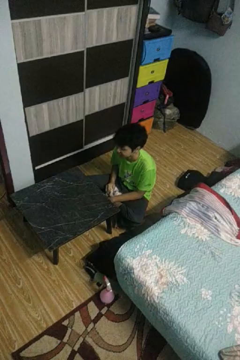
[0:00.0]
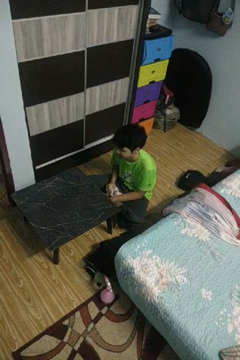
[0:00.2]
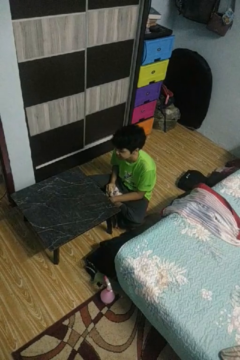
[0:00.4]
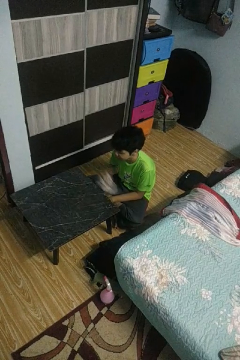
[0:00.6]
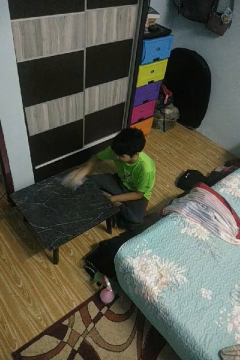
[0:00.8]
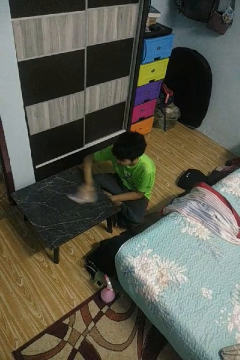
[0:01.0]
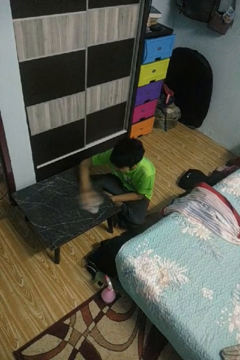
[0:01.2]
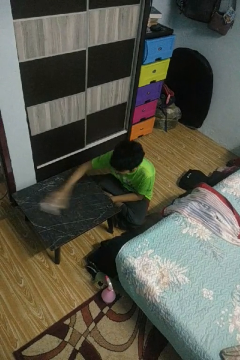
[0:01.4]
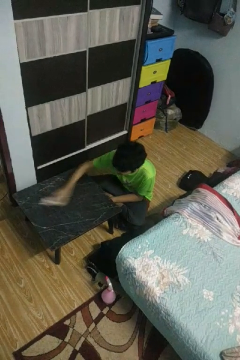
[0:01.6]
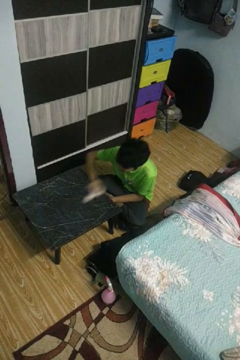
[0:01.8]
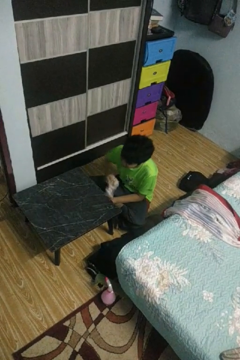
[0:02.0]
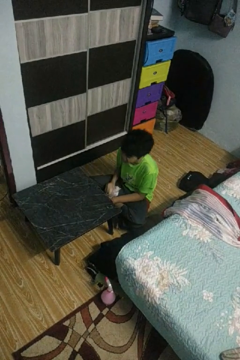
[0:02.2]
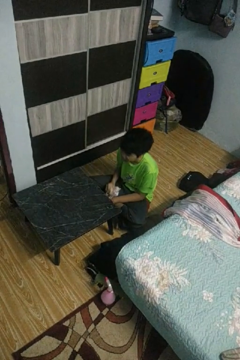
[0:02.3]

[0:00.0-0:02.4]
person cleans table with rag

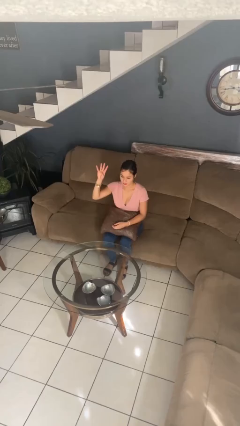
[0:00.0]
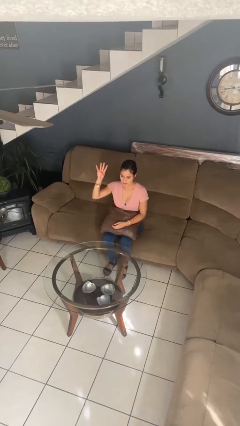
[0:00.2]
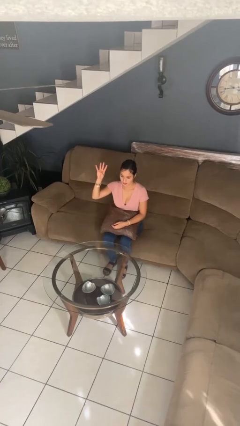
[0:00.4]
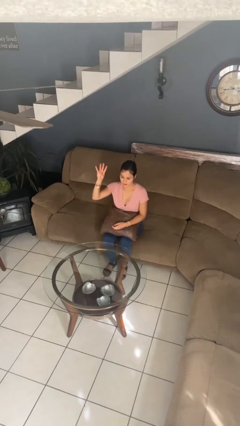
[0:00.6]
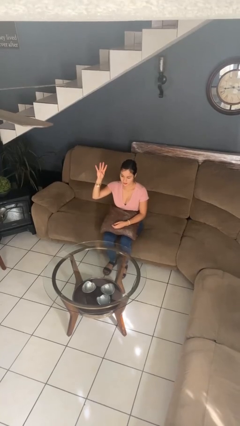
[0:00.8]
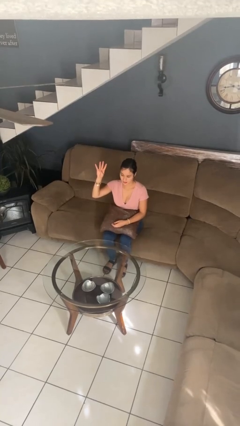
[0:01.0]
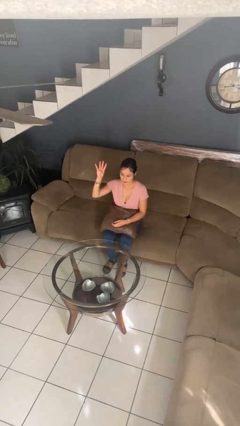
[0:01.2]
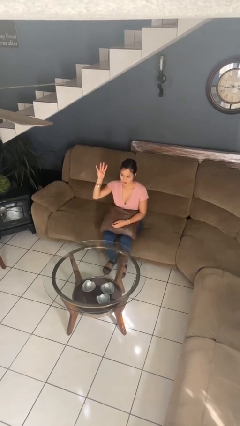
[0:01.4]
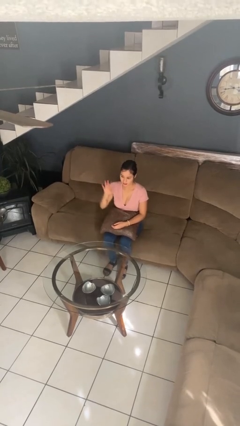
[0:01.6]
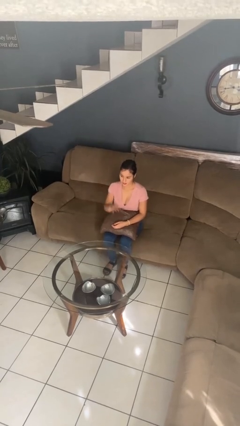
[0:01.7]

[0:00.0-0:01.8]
person gestures number four

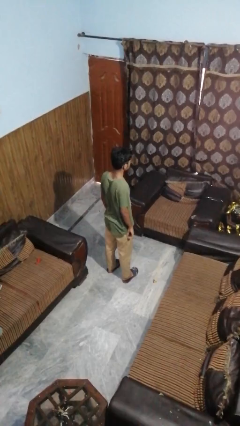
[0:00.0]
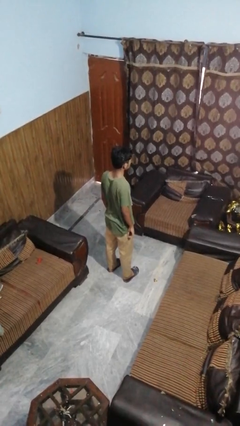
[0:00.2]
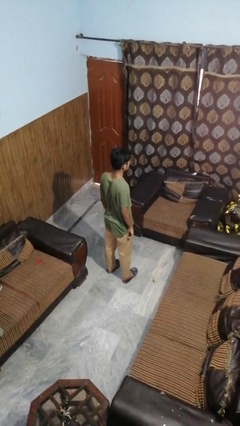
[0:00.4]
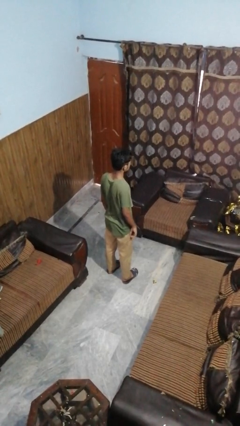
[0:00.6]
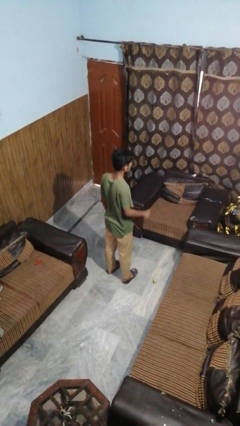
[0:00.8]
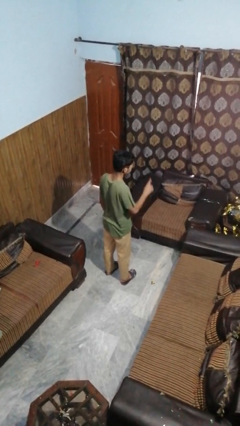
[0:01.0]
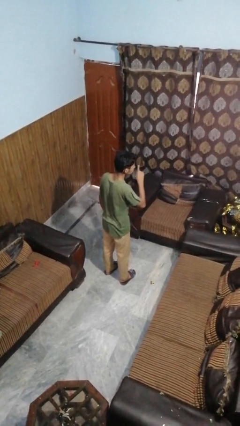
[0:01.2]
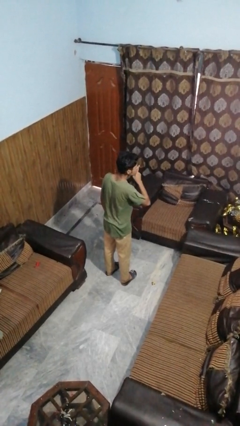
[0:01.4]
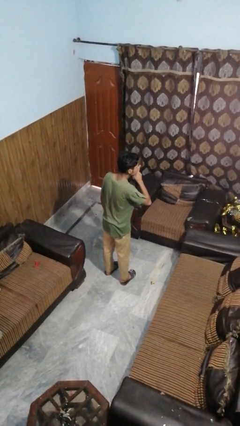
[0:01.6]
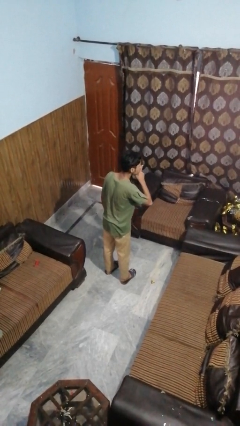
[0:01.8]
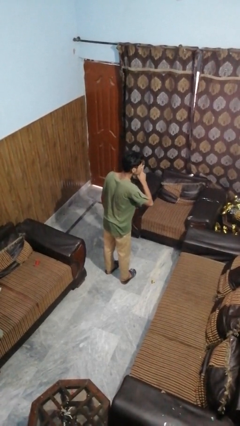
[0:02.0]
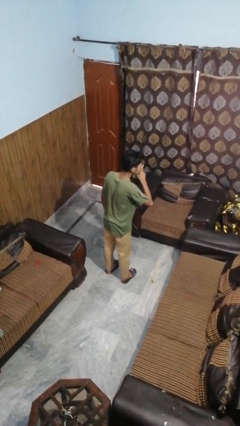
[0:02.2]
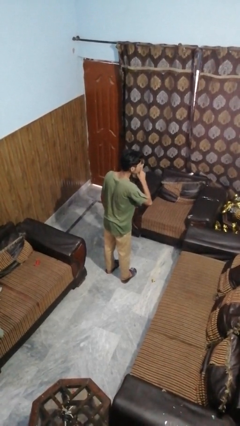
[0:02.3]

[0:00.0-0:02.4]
person gestures be quiet

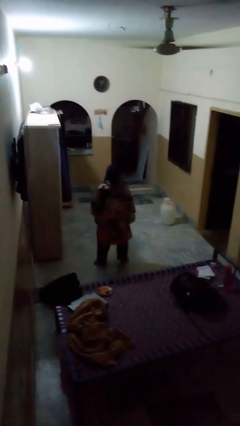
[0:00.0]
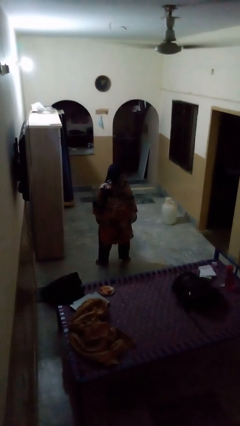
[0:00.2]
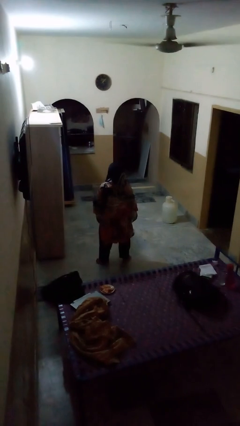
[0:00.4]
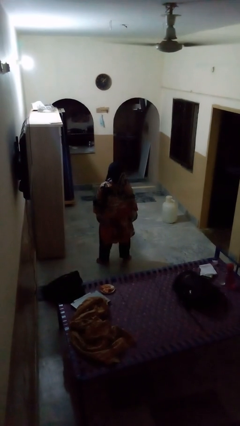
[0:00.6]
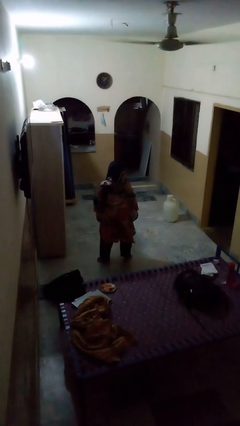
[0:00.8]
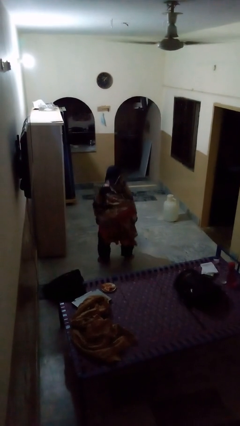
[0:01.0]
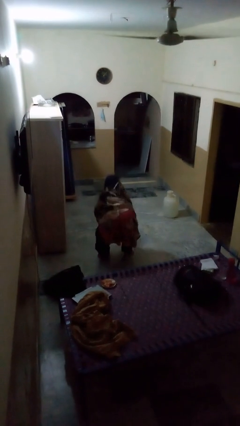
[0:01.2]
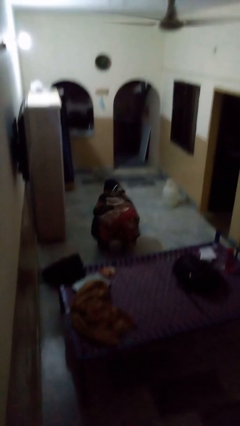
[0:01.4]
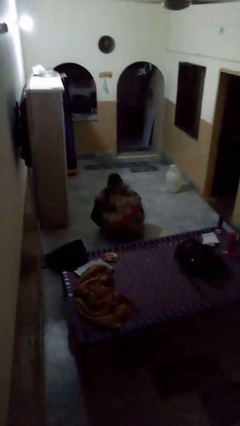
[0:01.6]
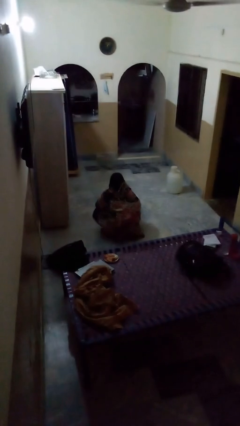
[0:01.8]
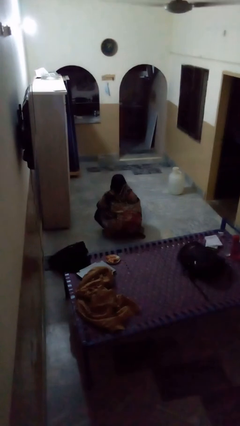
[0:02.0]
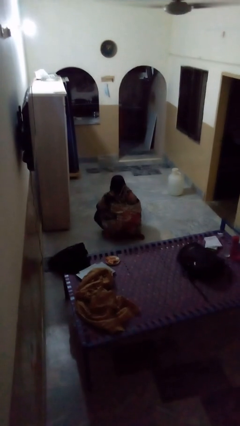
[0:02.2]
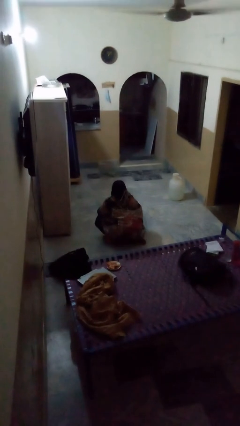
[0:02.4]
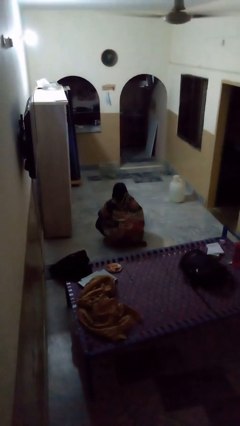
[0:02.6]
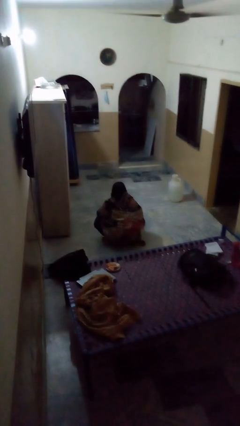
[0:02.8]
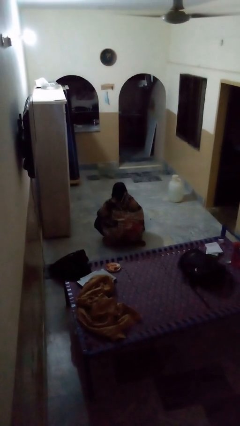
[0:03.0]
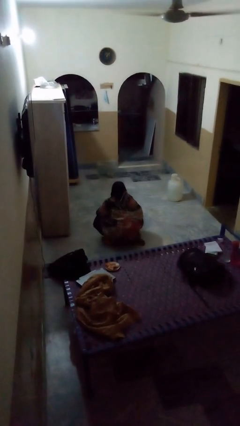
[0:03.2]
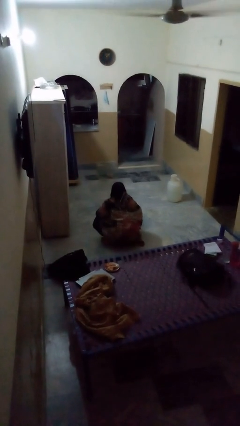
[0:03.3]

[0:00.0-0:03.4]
person squats

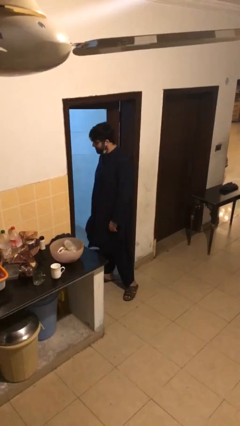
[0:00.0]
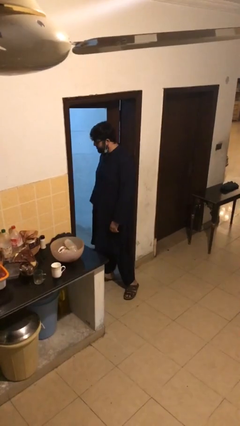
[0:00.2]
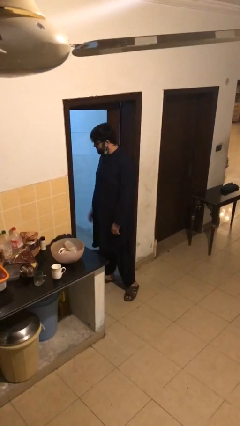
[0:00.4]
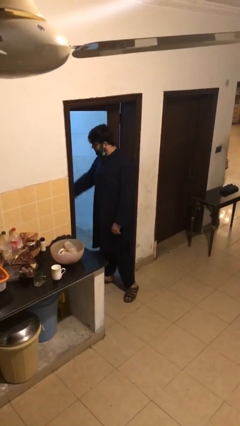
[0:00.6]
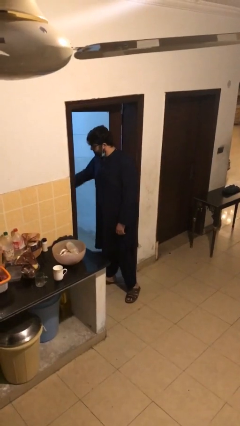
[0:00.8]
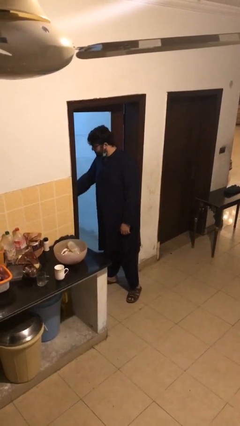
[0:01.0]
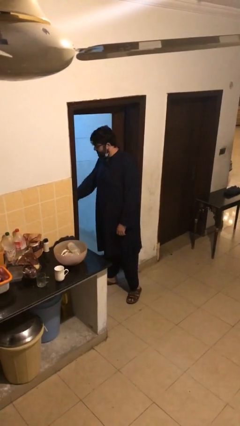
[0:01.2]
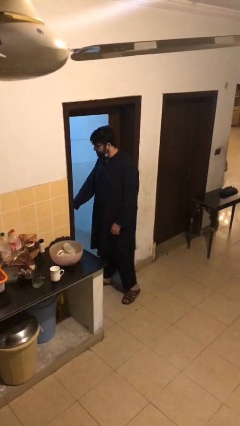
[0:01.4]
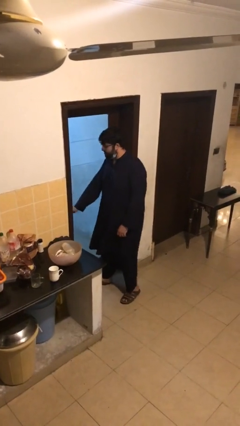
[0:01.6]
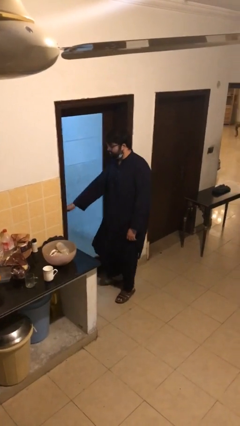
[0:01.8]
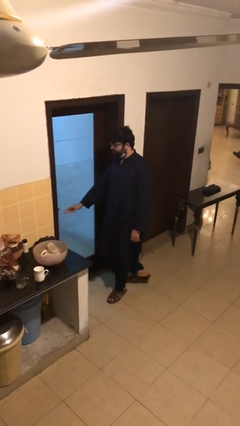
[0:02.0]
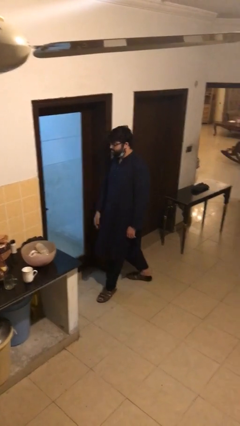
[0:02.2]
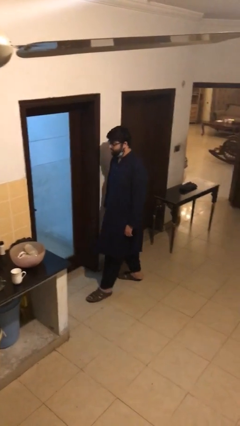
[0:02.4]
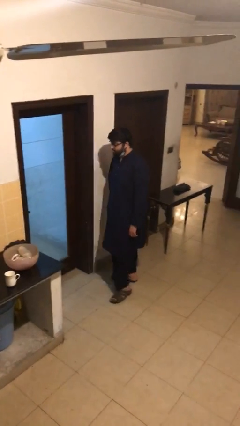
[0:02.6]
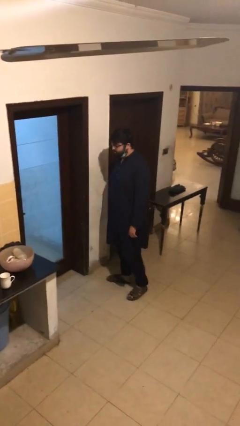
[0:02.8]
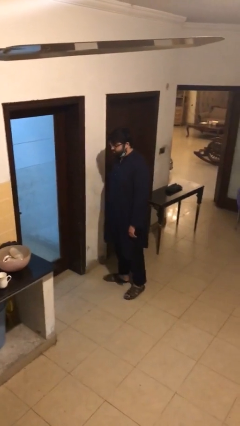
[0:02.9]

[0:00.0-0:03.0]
person closes facility door

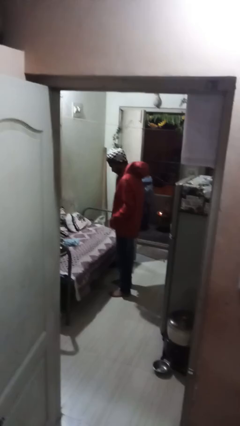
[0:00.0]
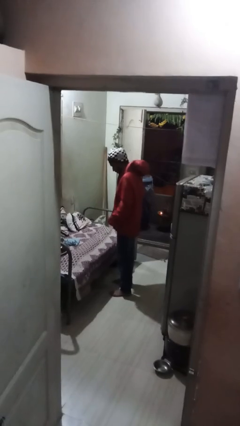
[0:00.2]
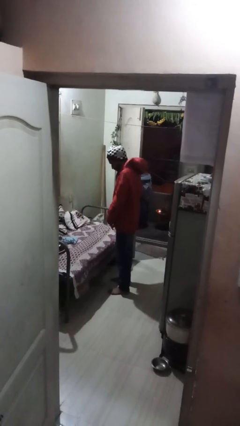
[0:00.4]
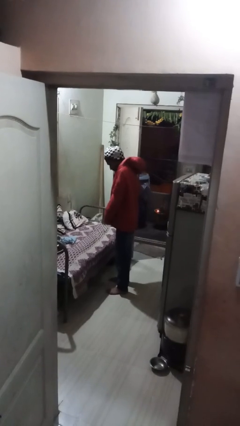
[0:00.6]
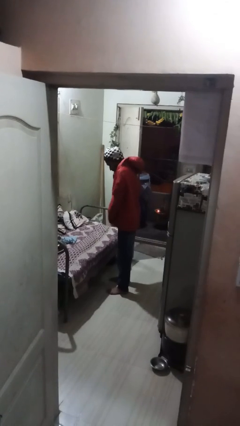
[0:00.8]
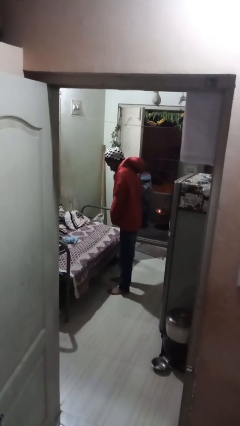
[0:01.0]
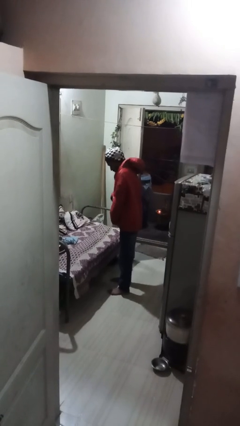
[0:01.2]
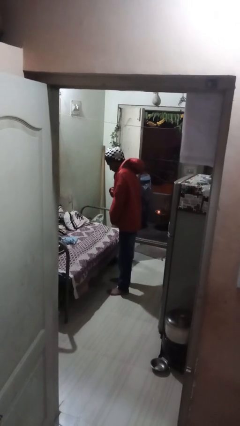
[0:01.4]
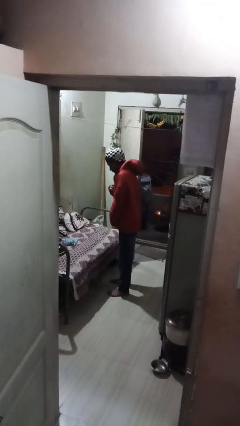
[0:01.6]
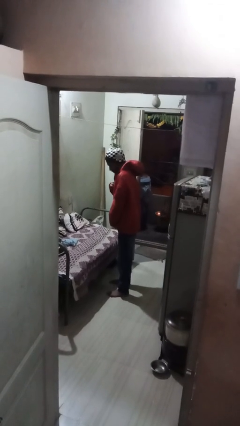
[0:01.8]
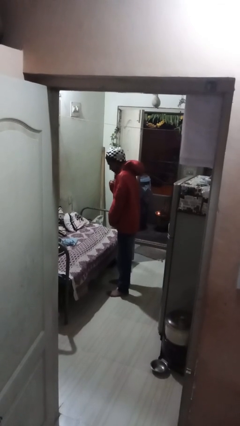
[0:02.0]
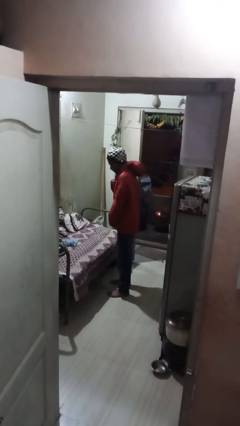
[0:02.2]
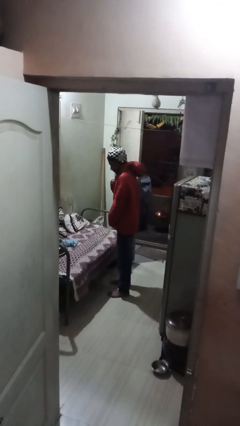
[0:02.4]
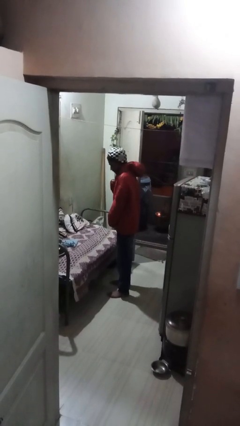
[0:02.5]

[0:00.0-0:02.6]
person zips up jacket

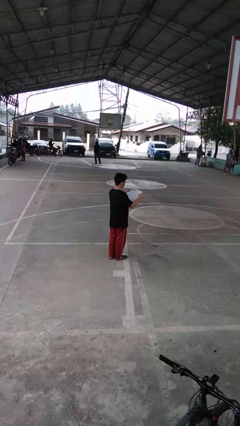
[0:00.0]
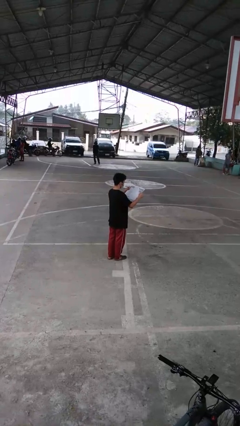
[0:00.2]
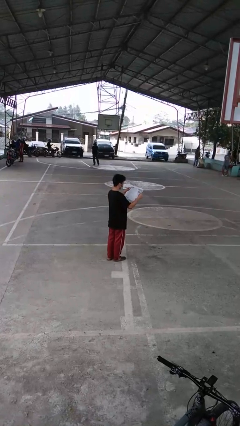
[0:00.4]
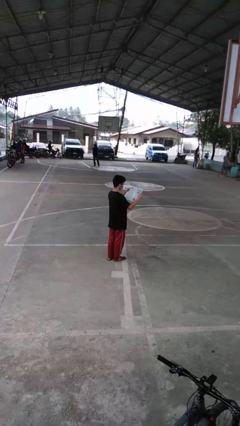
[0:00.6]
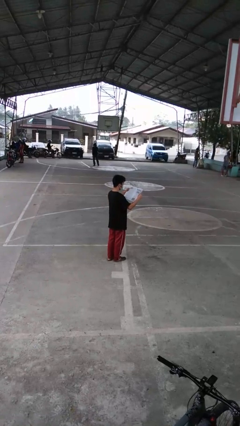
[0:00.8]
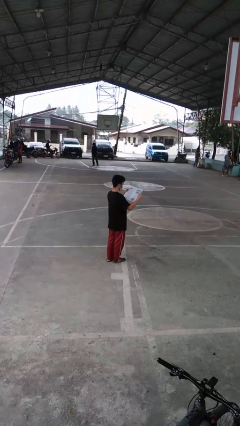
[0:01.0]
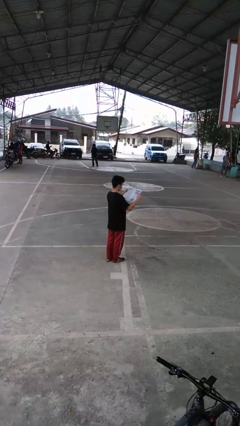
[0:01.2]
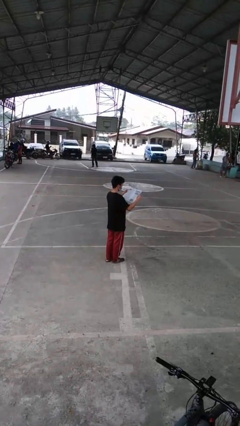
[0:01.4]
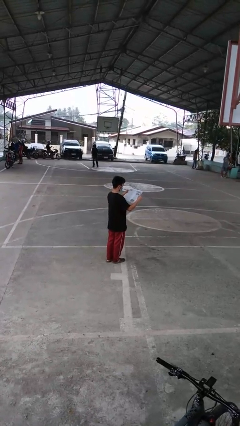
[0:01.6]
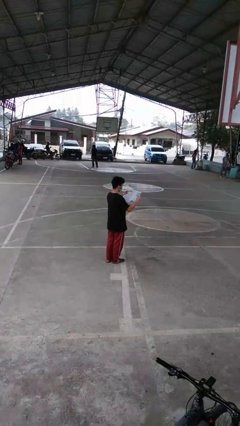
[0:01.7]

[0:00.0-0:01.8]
person reads newspaper
